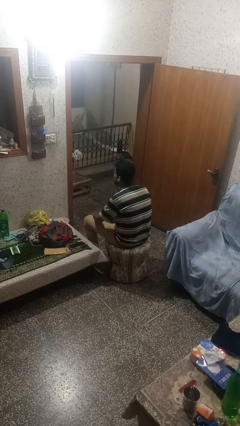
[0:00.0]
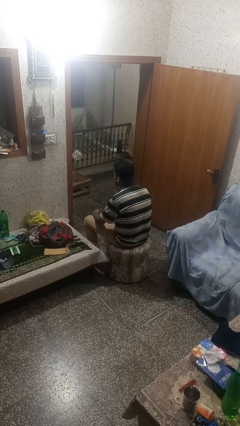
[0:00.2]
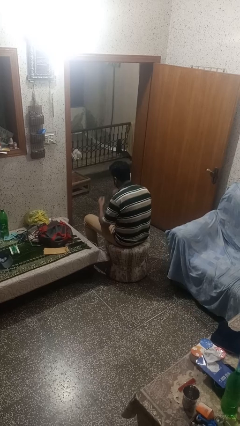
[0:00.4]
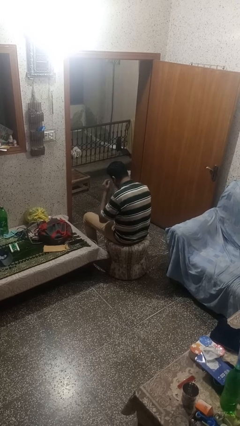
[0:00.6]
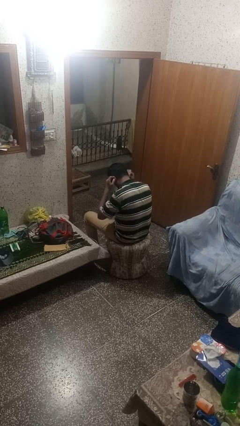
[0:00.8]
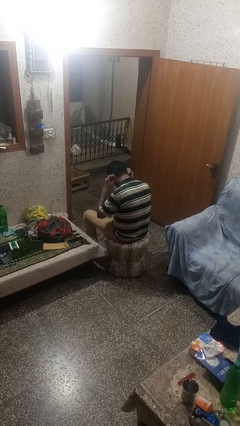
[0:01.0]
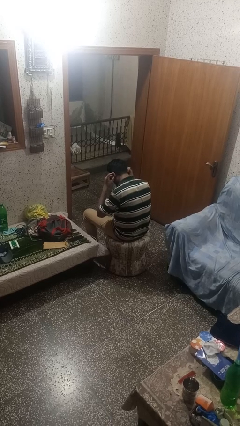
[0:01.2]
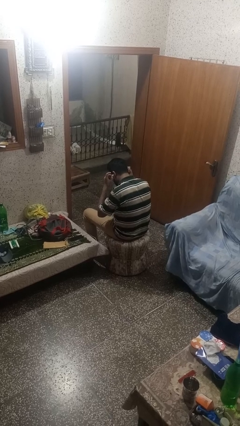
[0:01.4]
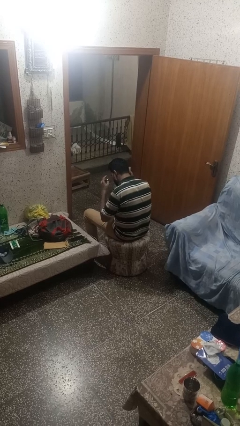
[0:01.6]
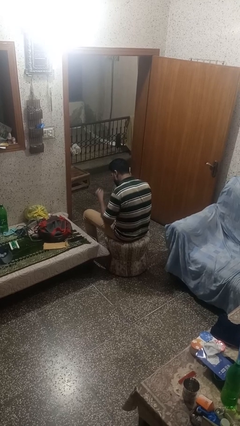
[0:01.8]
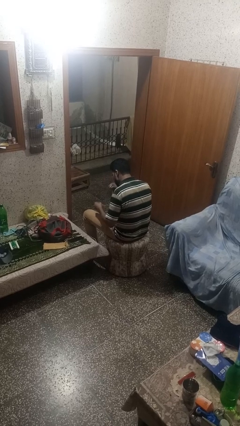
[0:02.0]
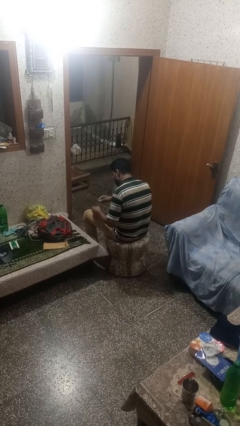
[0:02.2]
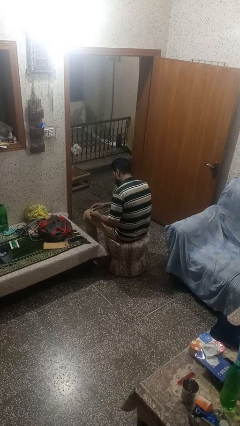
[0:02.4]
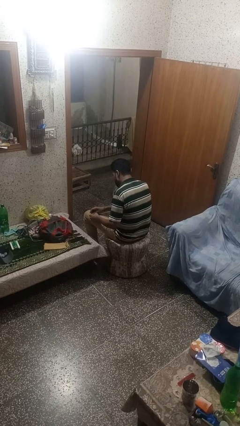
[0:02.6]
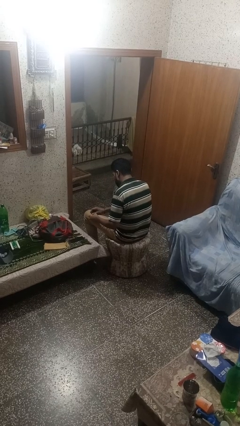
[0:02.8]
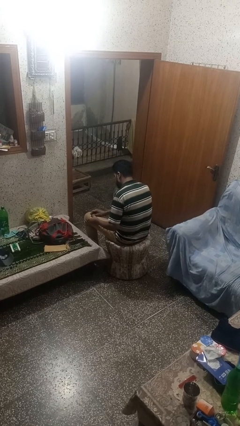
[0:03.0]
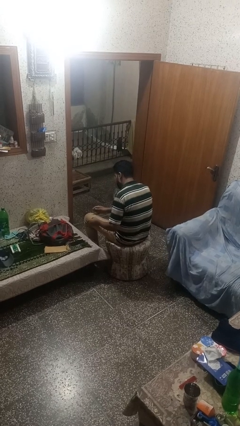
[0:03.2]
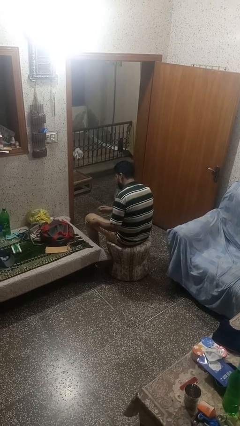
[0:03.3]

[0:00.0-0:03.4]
person takes off headphones

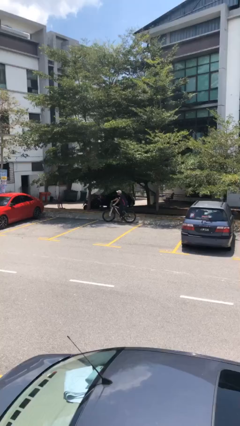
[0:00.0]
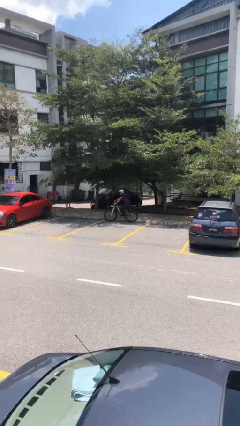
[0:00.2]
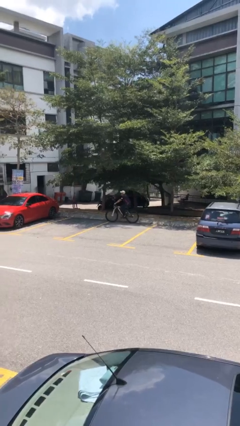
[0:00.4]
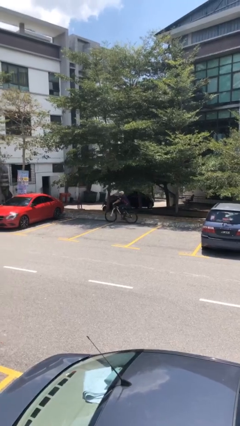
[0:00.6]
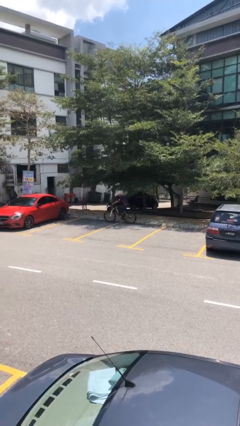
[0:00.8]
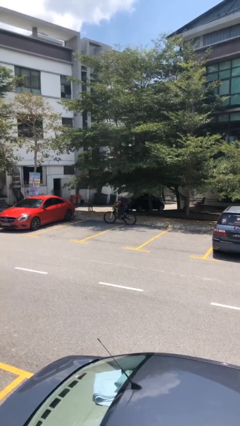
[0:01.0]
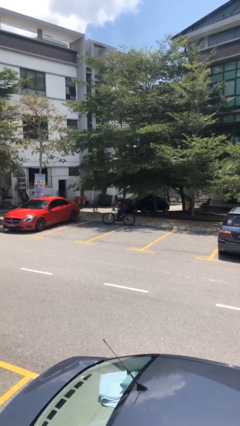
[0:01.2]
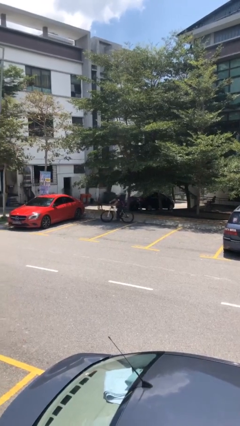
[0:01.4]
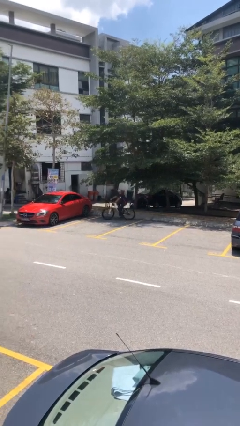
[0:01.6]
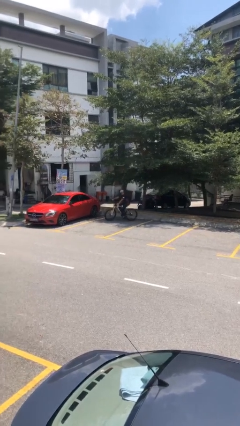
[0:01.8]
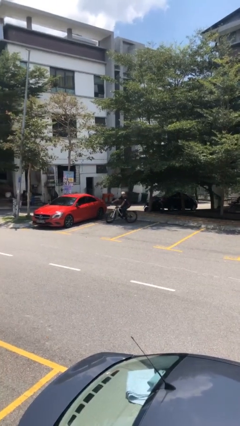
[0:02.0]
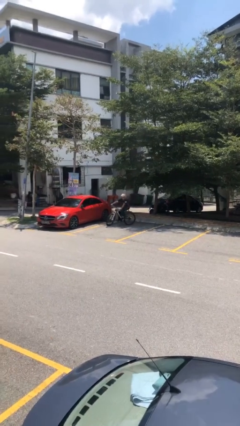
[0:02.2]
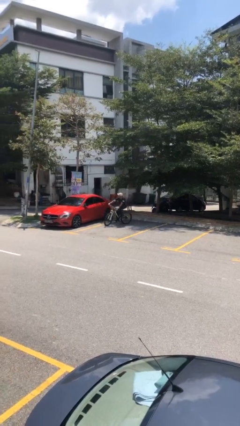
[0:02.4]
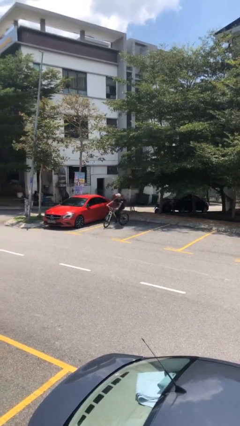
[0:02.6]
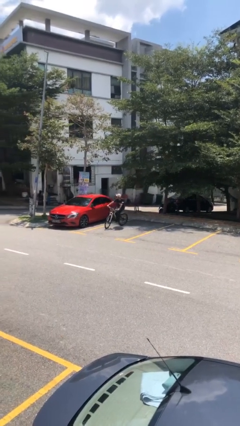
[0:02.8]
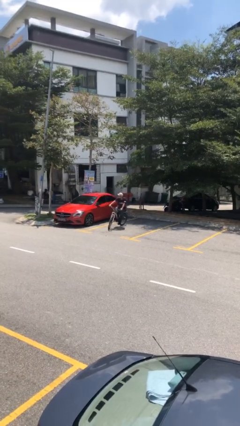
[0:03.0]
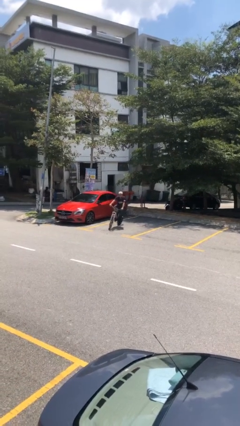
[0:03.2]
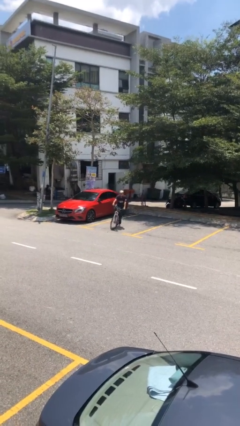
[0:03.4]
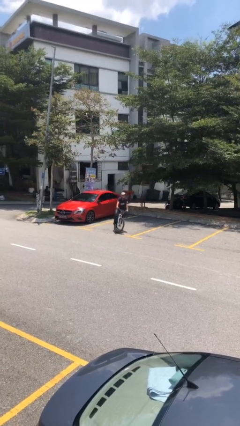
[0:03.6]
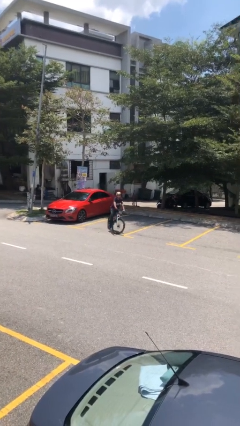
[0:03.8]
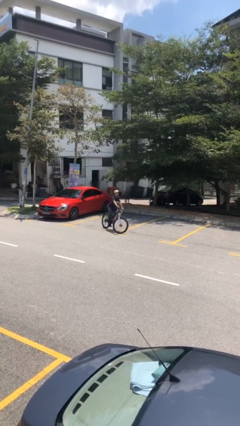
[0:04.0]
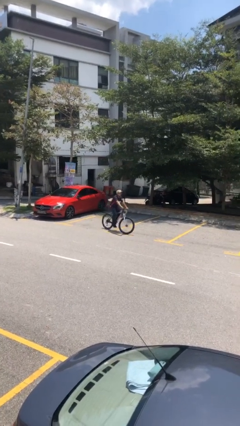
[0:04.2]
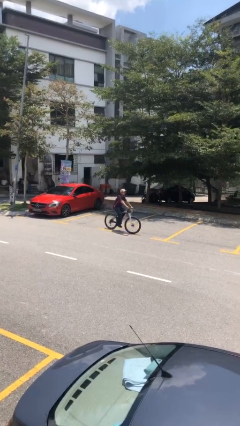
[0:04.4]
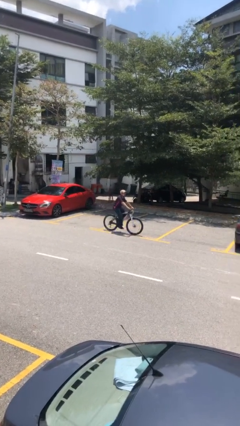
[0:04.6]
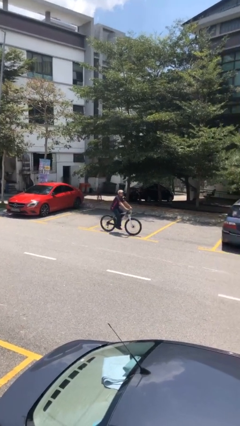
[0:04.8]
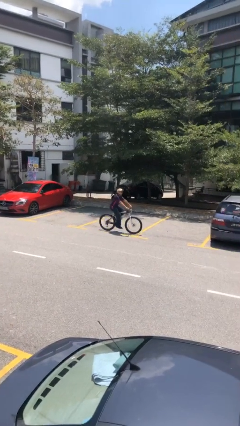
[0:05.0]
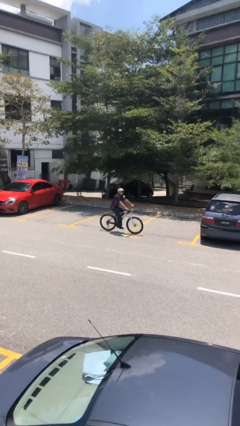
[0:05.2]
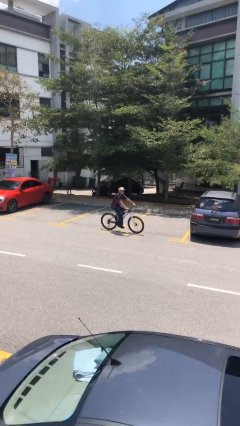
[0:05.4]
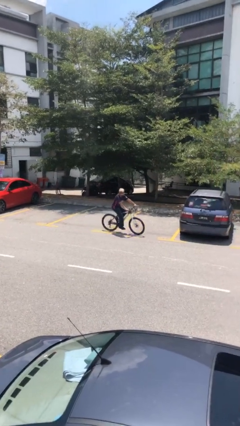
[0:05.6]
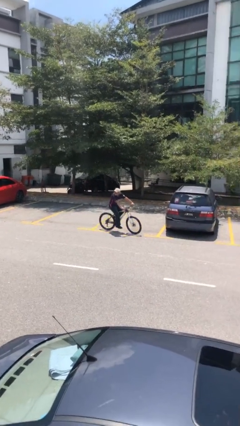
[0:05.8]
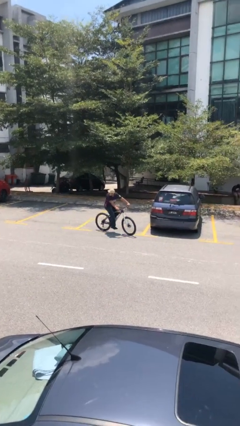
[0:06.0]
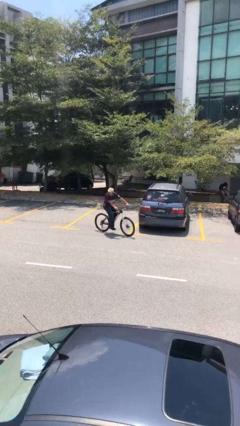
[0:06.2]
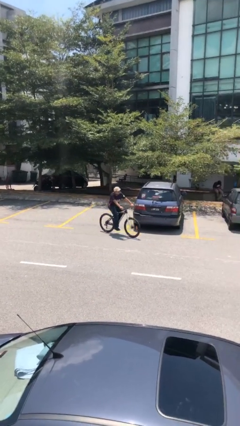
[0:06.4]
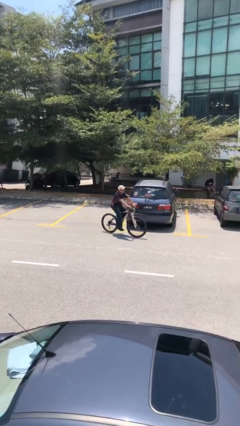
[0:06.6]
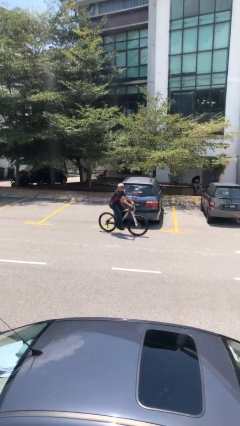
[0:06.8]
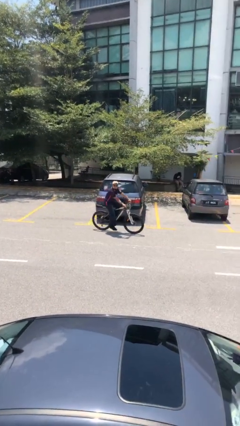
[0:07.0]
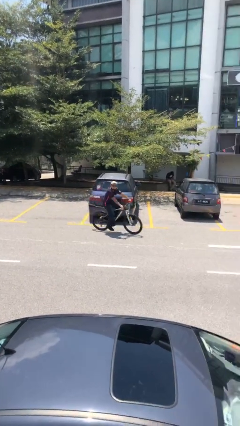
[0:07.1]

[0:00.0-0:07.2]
person rides bicycle

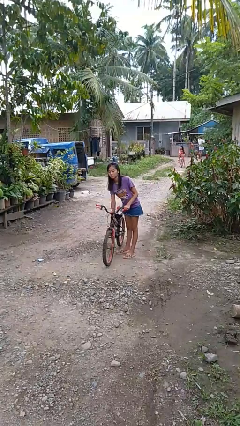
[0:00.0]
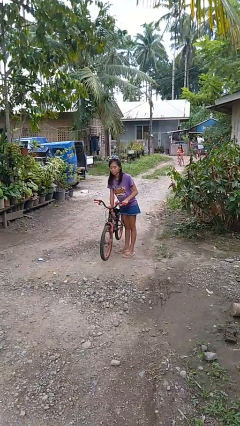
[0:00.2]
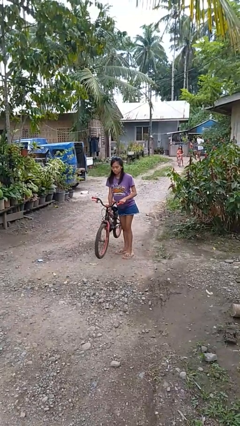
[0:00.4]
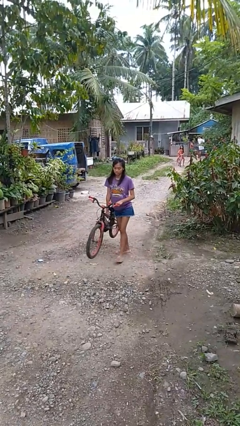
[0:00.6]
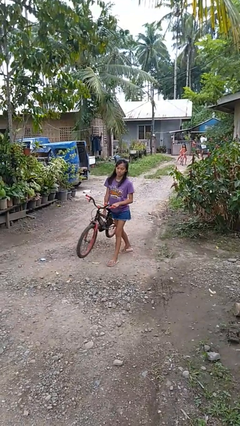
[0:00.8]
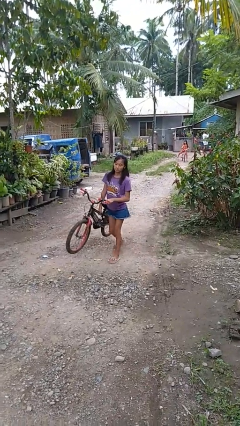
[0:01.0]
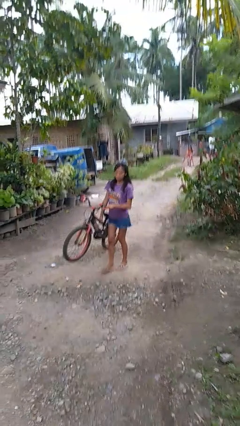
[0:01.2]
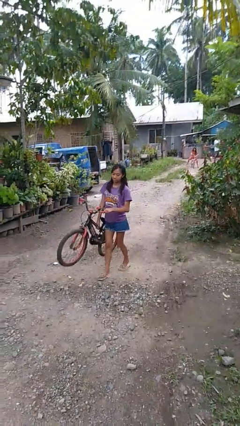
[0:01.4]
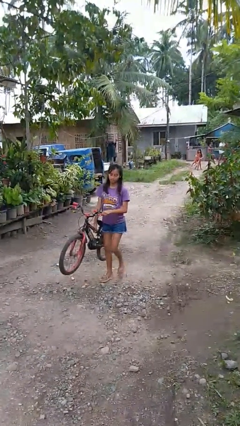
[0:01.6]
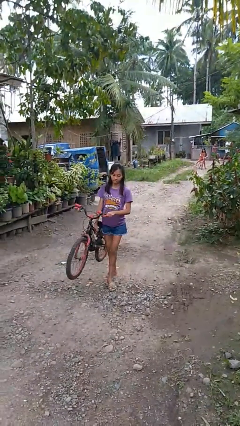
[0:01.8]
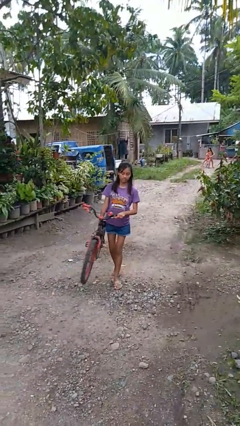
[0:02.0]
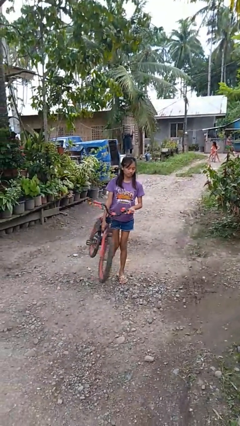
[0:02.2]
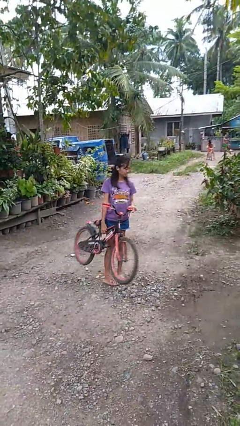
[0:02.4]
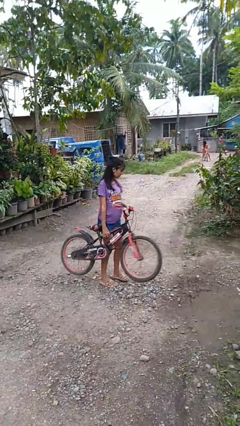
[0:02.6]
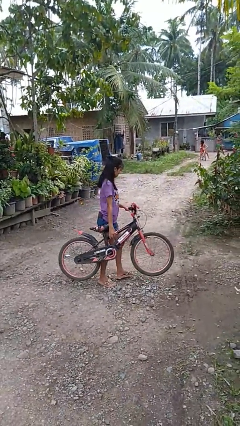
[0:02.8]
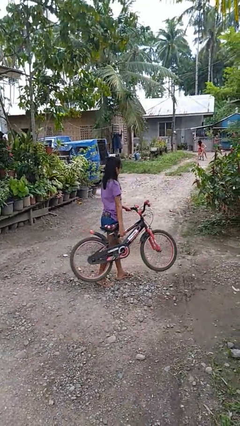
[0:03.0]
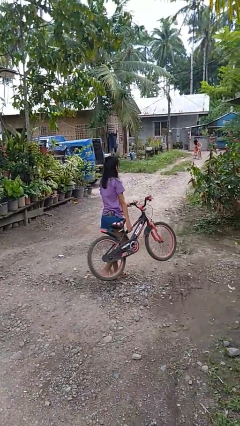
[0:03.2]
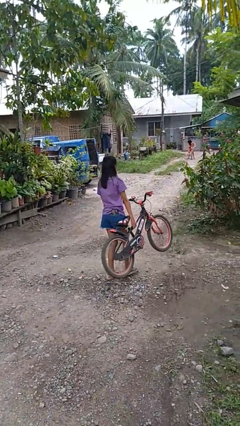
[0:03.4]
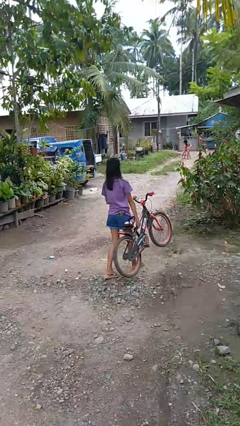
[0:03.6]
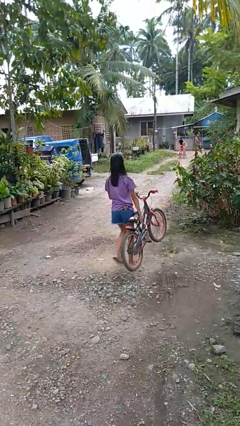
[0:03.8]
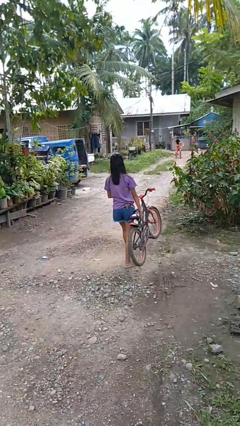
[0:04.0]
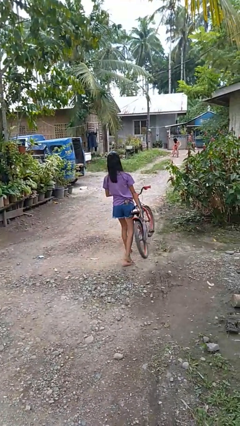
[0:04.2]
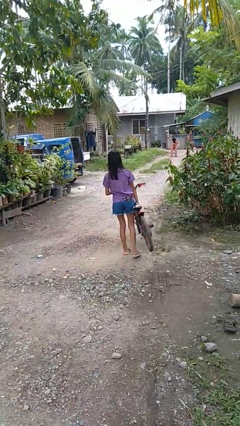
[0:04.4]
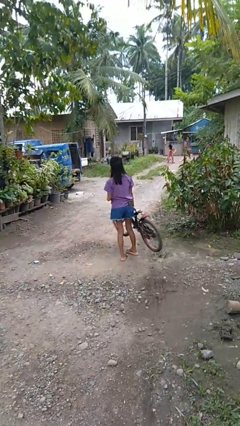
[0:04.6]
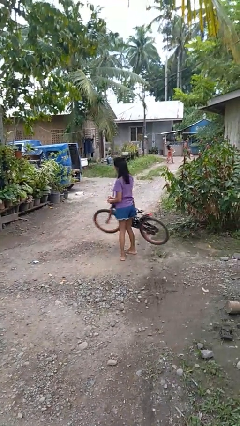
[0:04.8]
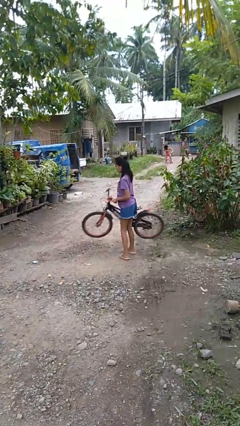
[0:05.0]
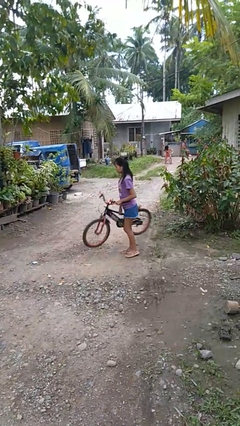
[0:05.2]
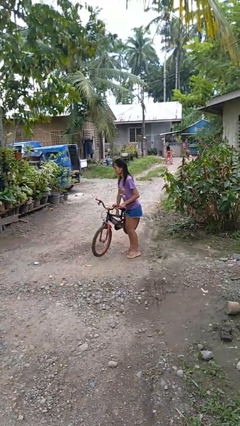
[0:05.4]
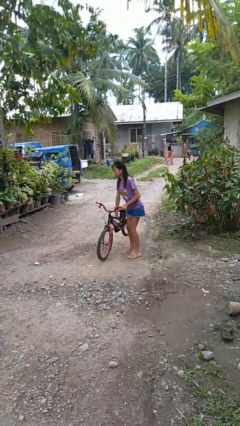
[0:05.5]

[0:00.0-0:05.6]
person carries bicycle

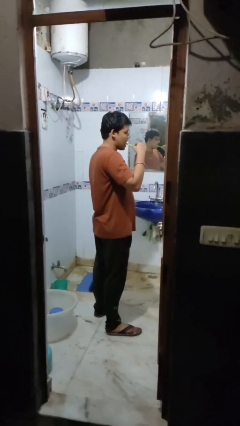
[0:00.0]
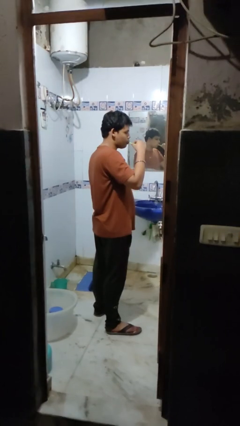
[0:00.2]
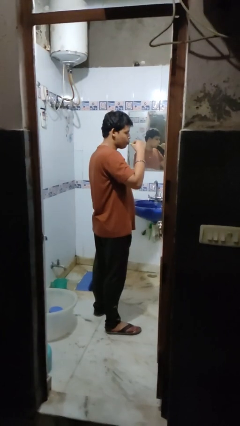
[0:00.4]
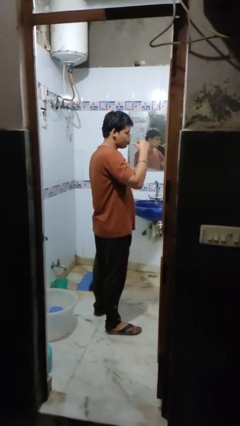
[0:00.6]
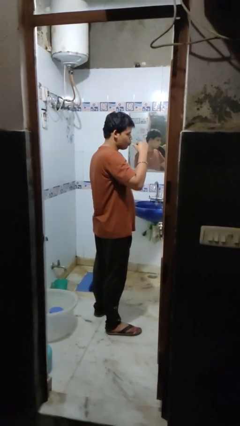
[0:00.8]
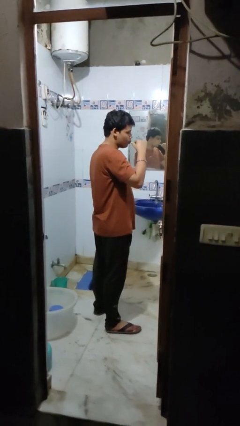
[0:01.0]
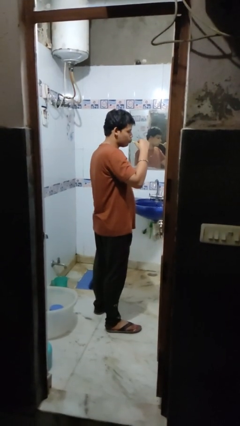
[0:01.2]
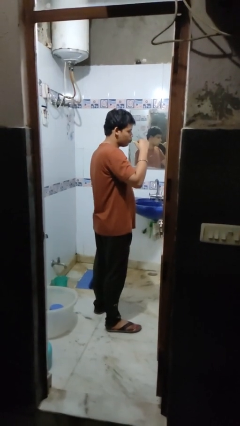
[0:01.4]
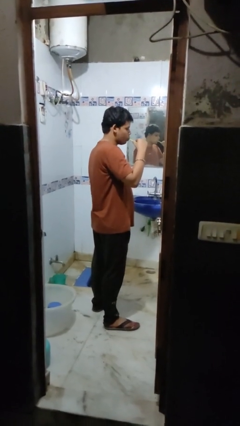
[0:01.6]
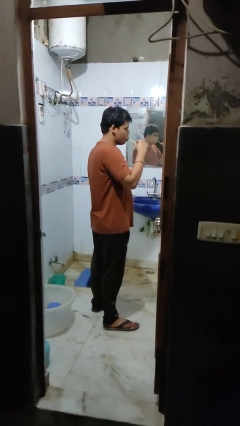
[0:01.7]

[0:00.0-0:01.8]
person brushes teeth
